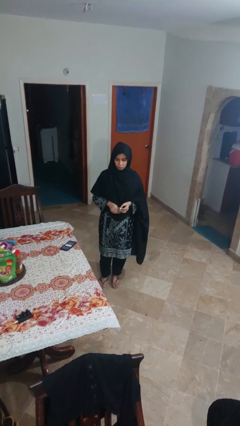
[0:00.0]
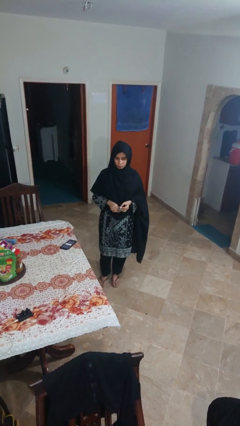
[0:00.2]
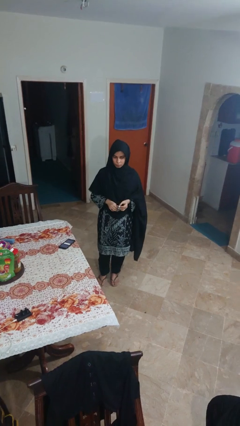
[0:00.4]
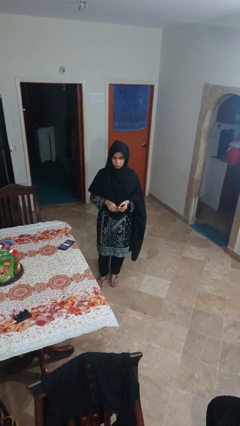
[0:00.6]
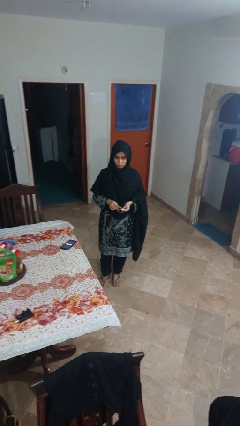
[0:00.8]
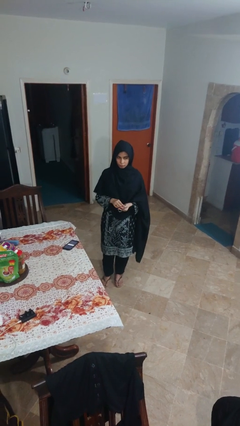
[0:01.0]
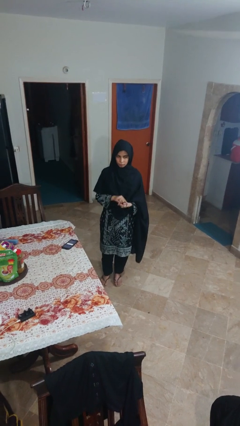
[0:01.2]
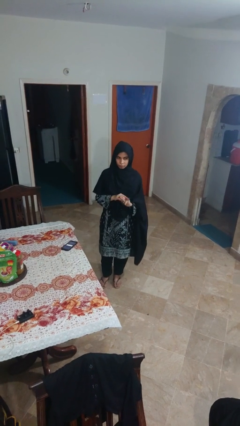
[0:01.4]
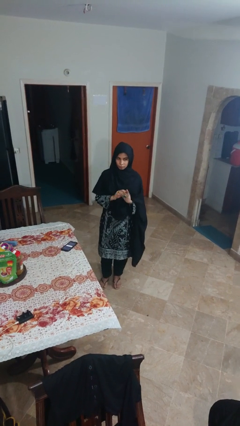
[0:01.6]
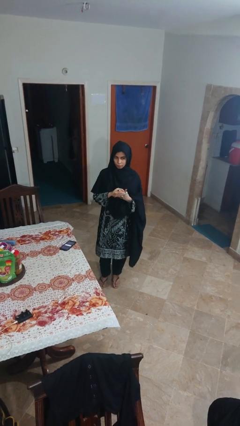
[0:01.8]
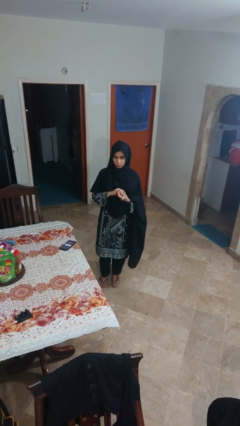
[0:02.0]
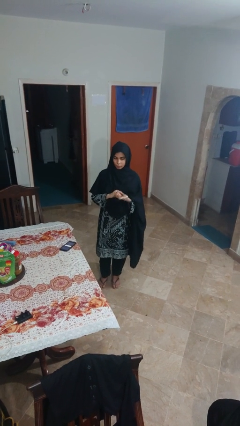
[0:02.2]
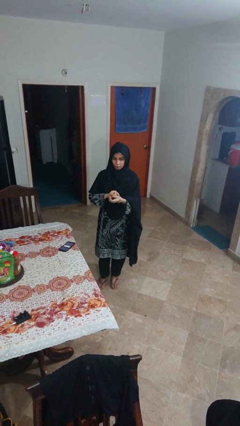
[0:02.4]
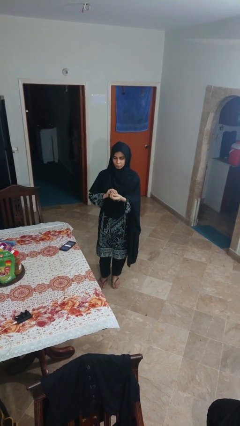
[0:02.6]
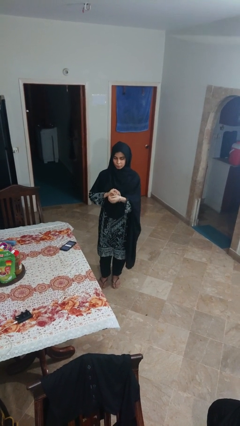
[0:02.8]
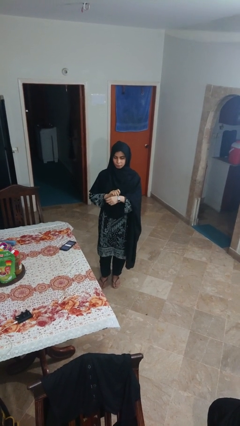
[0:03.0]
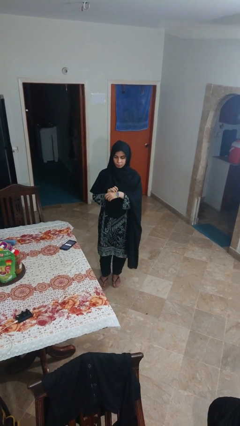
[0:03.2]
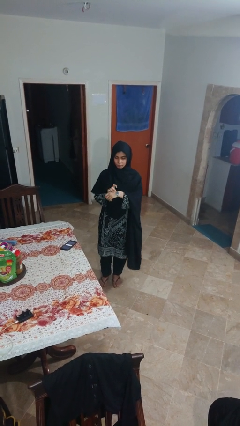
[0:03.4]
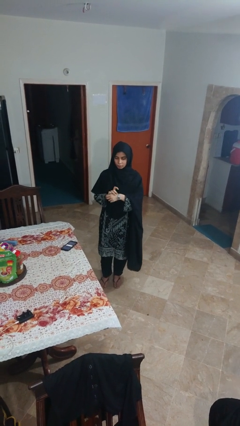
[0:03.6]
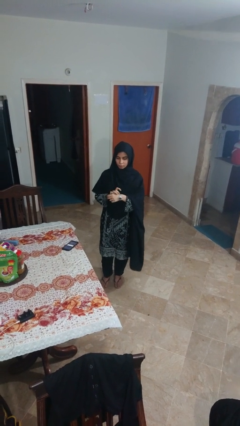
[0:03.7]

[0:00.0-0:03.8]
person puts on wristwatch

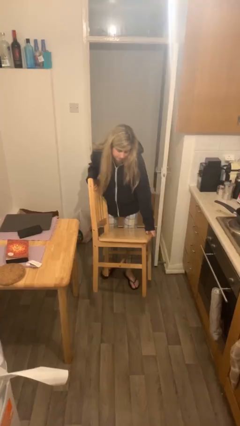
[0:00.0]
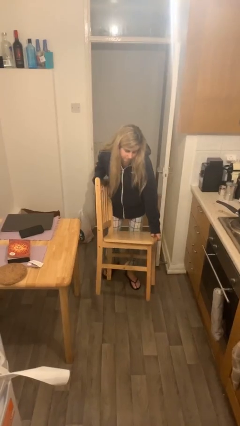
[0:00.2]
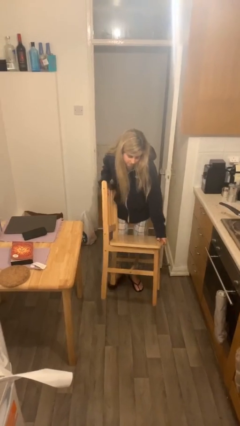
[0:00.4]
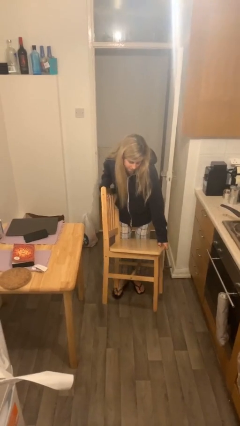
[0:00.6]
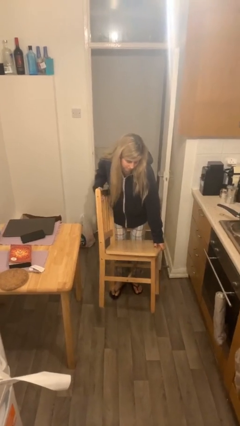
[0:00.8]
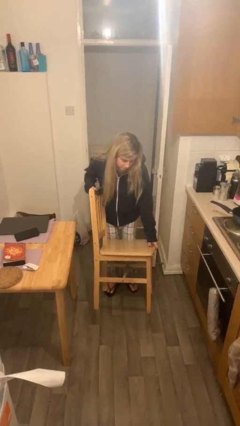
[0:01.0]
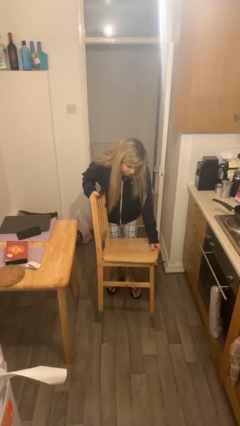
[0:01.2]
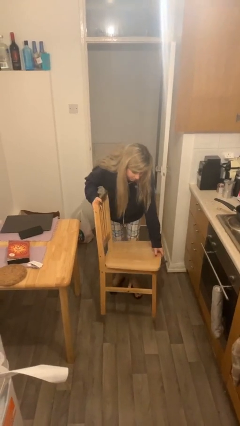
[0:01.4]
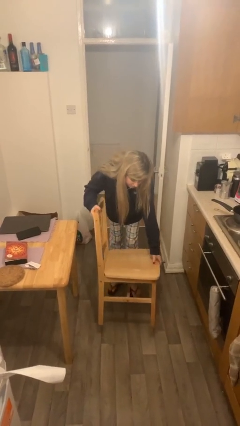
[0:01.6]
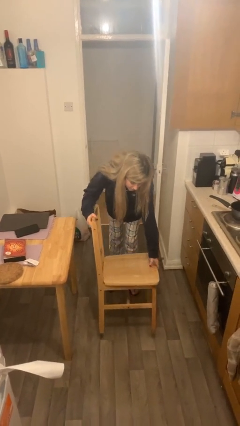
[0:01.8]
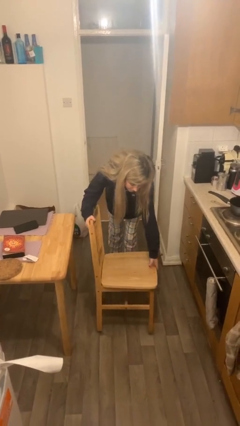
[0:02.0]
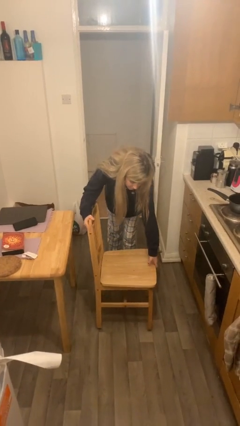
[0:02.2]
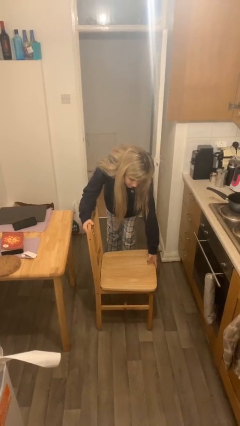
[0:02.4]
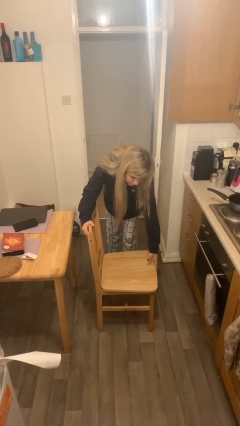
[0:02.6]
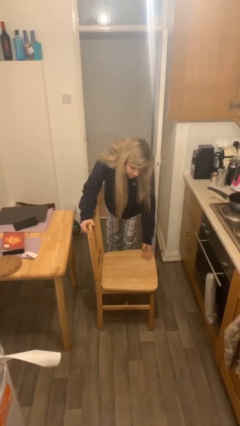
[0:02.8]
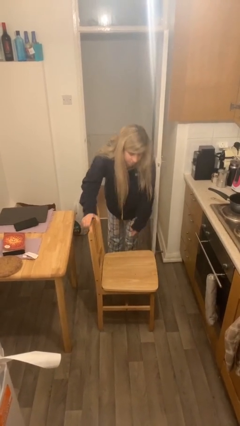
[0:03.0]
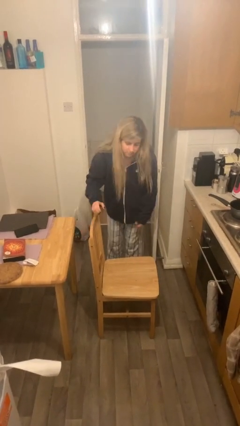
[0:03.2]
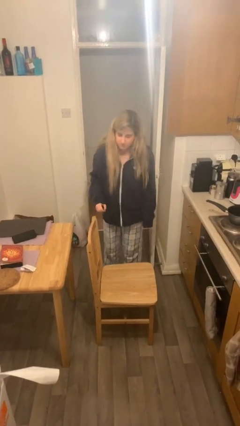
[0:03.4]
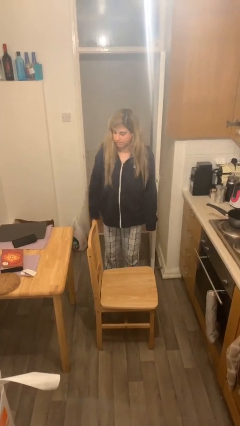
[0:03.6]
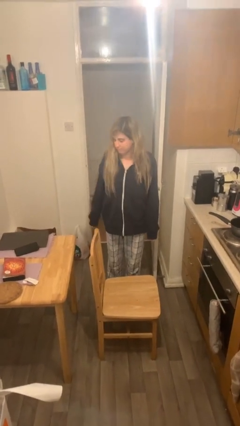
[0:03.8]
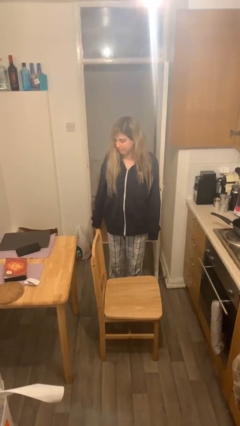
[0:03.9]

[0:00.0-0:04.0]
person puts down object on floor

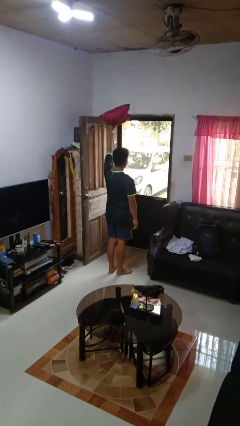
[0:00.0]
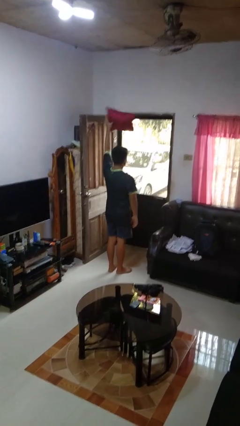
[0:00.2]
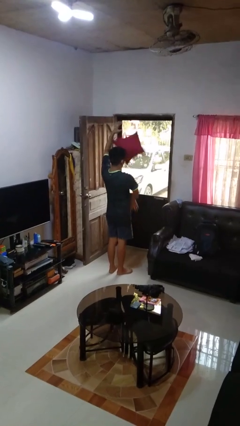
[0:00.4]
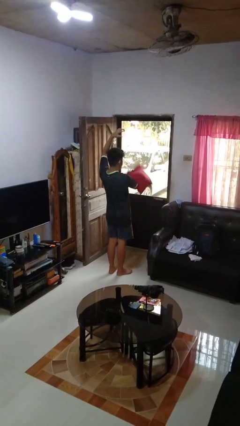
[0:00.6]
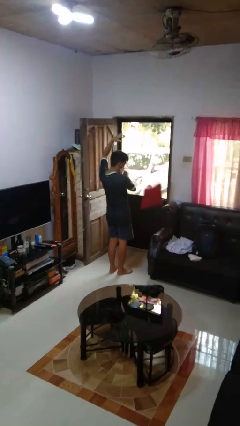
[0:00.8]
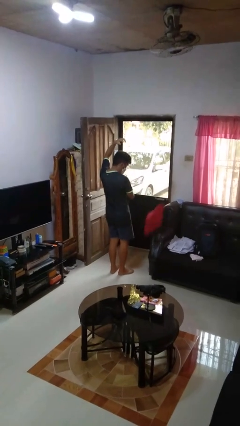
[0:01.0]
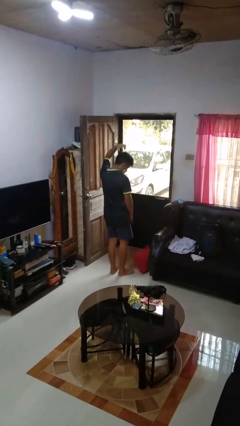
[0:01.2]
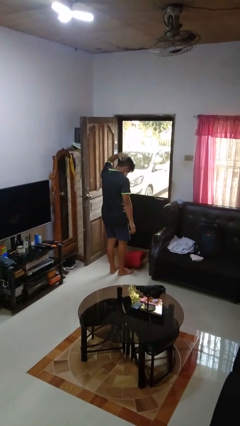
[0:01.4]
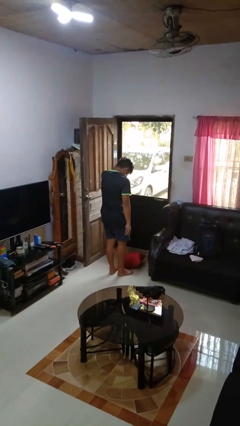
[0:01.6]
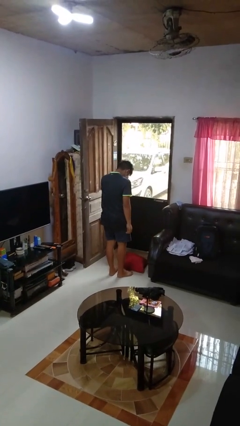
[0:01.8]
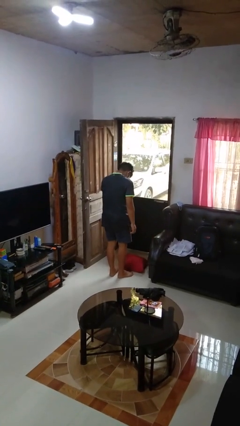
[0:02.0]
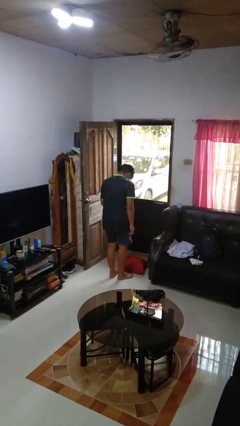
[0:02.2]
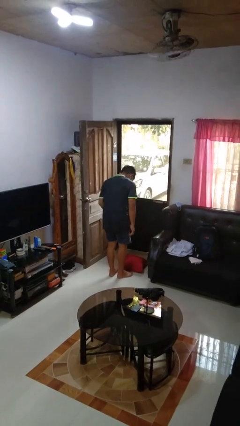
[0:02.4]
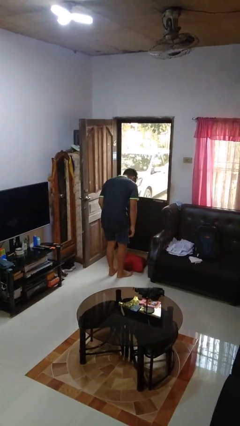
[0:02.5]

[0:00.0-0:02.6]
person drops object

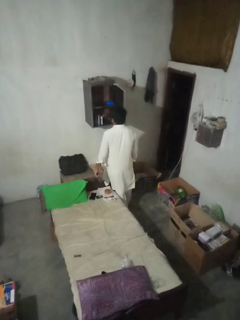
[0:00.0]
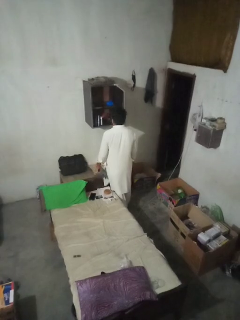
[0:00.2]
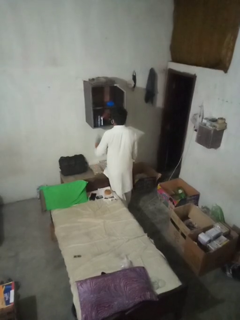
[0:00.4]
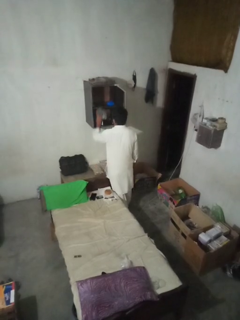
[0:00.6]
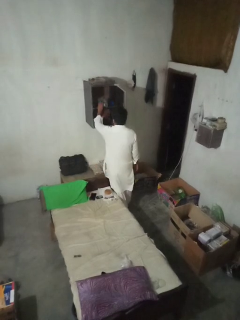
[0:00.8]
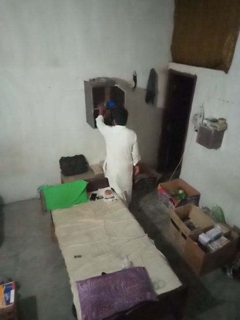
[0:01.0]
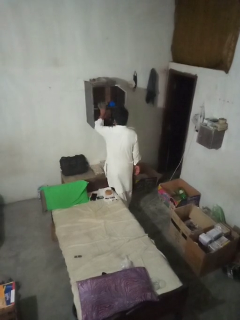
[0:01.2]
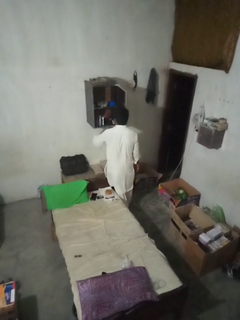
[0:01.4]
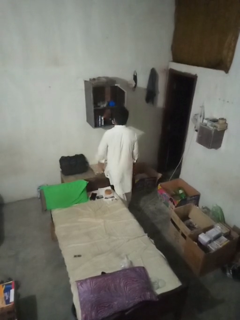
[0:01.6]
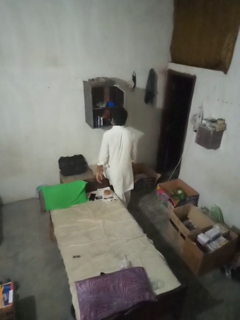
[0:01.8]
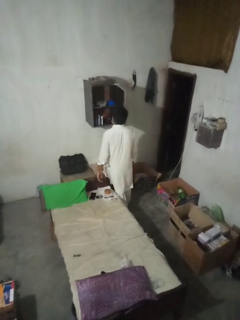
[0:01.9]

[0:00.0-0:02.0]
person puts clothes into dresser

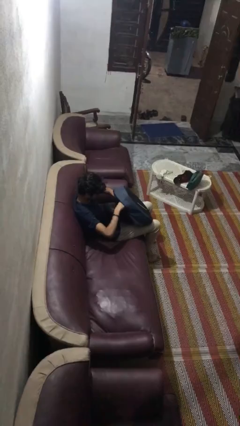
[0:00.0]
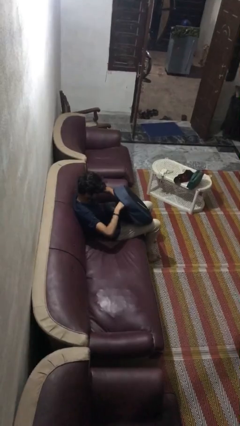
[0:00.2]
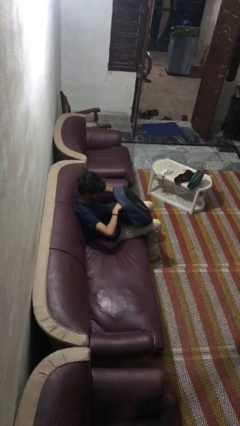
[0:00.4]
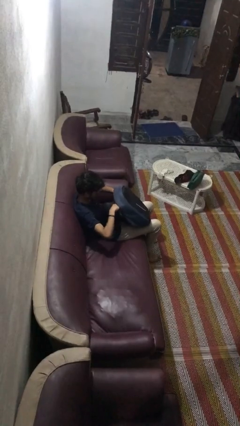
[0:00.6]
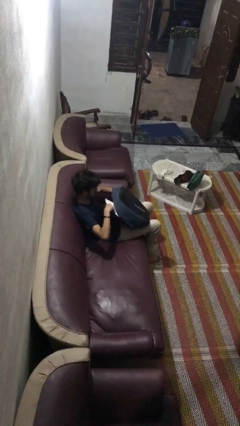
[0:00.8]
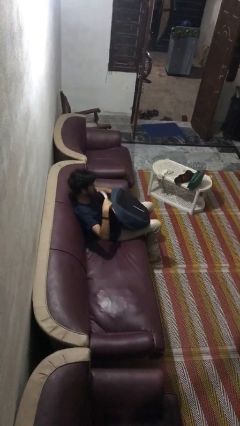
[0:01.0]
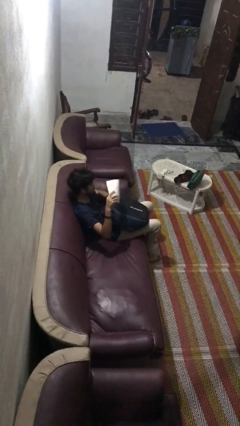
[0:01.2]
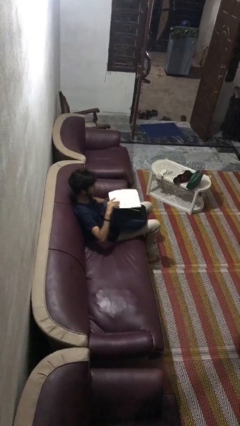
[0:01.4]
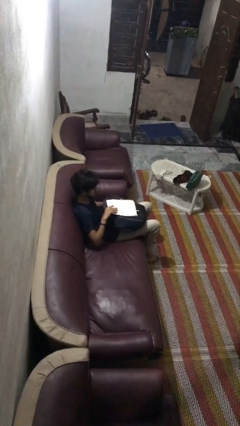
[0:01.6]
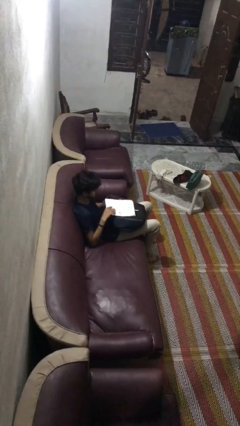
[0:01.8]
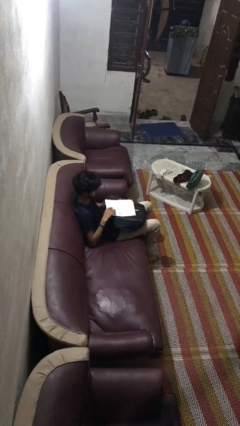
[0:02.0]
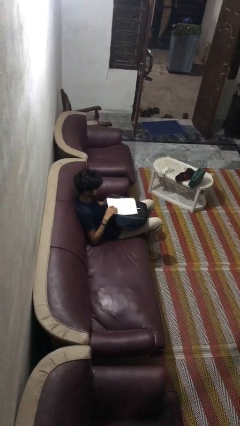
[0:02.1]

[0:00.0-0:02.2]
person takes object from backpack

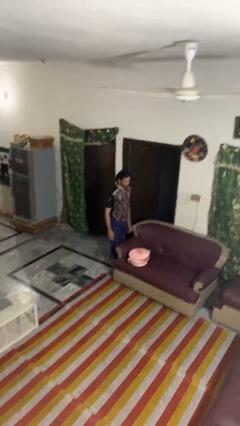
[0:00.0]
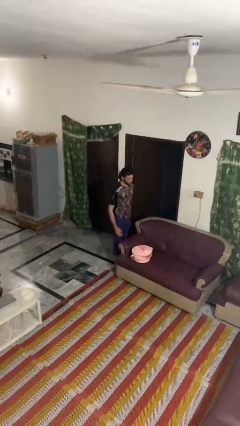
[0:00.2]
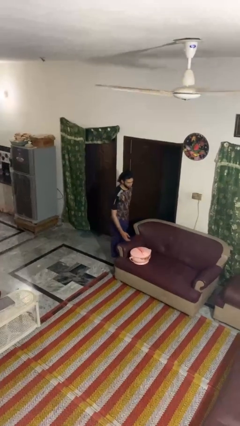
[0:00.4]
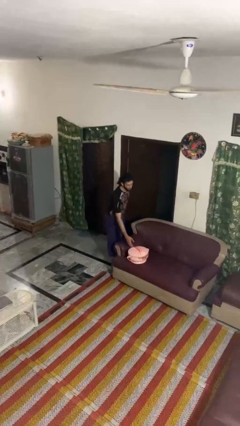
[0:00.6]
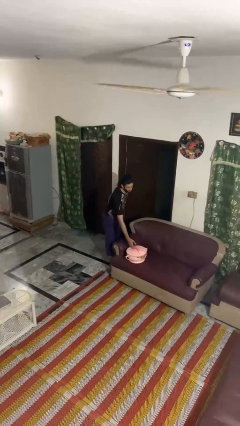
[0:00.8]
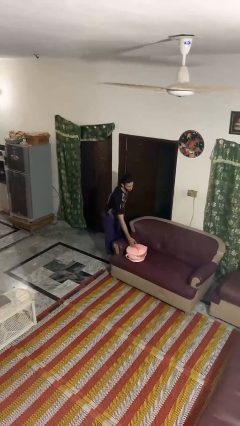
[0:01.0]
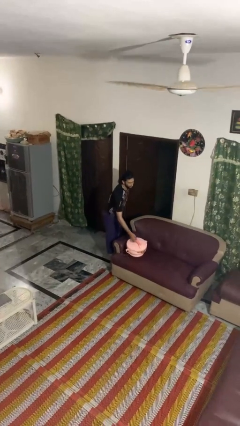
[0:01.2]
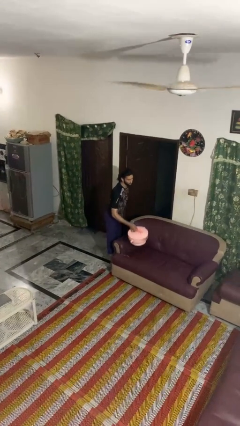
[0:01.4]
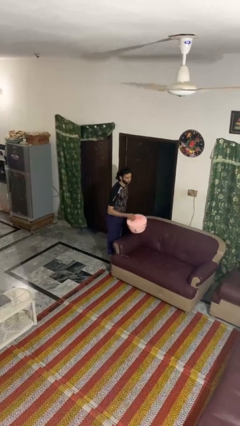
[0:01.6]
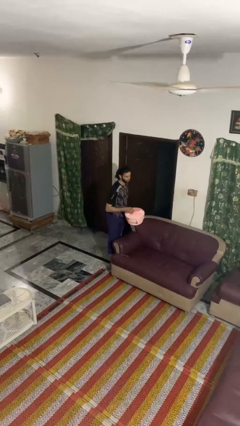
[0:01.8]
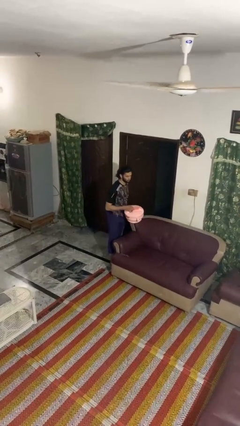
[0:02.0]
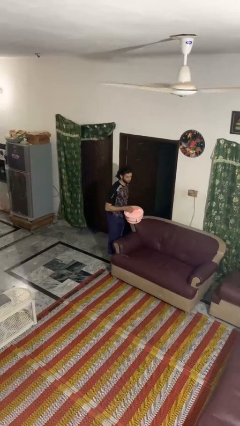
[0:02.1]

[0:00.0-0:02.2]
person picks up object from couch

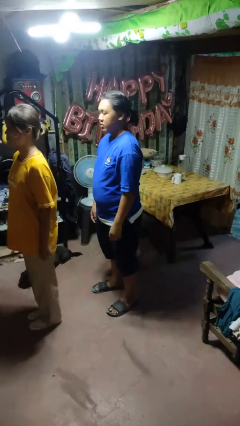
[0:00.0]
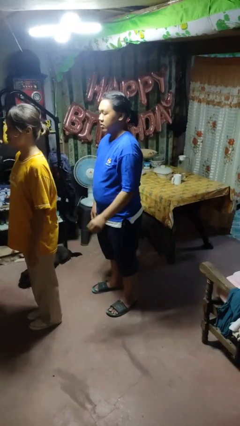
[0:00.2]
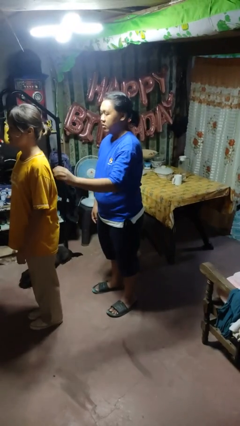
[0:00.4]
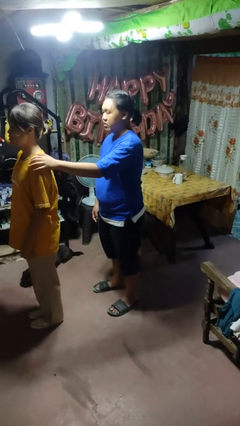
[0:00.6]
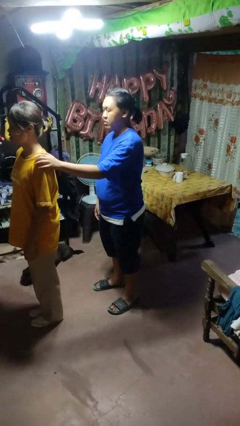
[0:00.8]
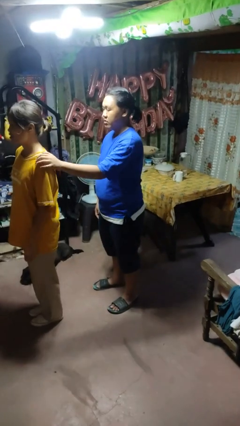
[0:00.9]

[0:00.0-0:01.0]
person grabs person by shoulder
